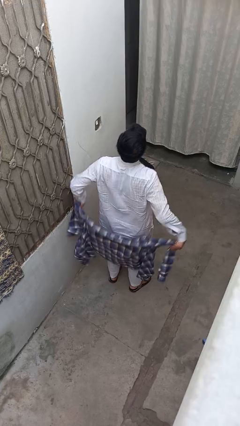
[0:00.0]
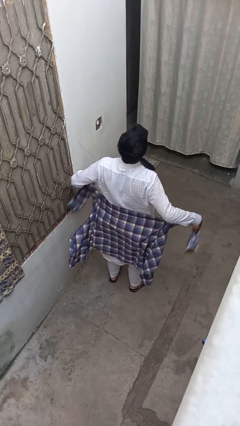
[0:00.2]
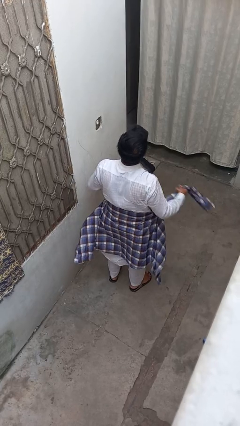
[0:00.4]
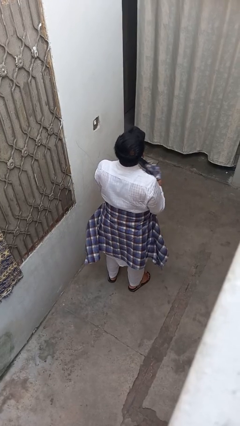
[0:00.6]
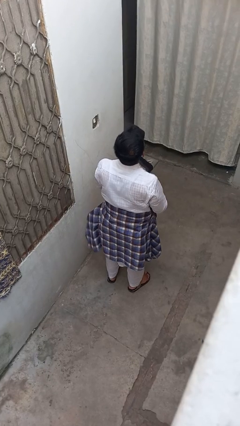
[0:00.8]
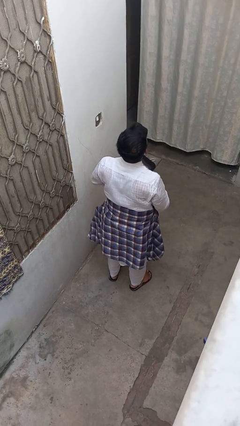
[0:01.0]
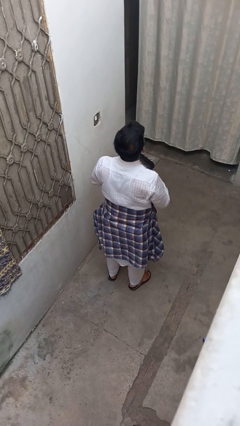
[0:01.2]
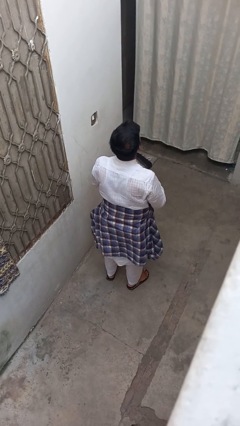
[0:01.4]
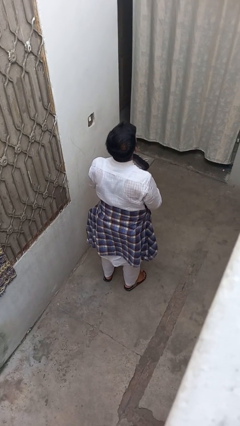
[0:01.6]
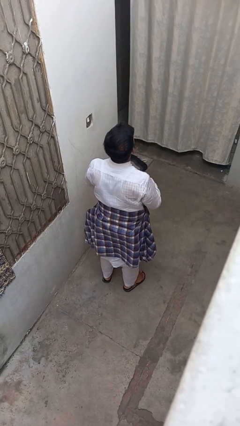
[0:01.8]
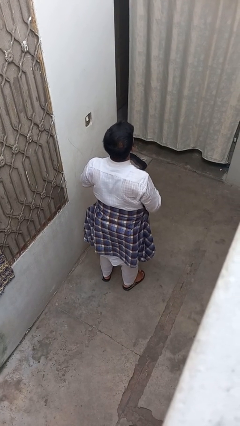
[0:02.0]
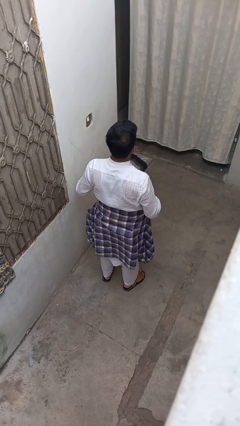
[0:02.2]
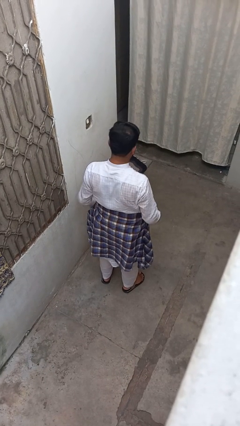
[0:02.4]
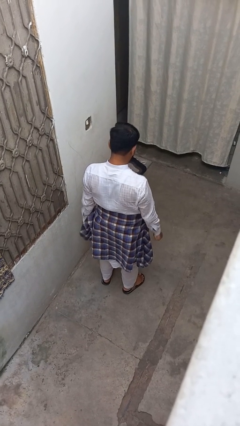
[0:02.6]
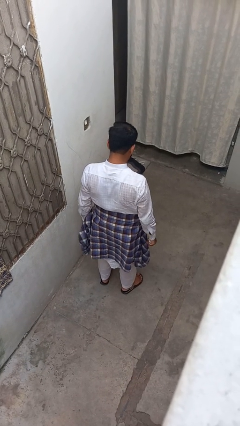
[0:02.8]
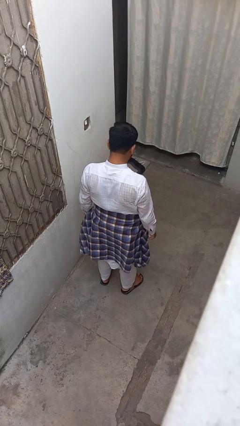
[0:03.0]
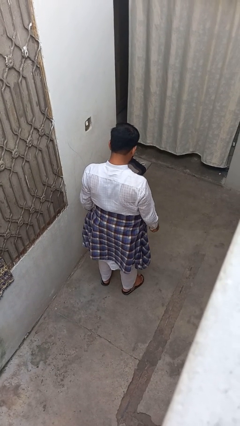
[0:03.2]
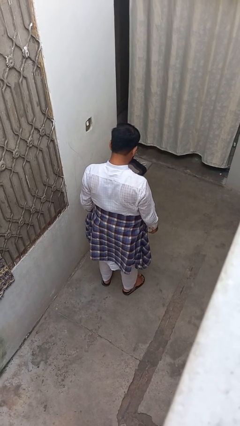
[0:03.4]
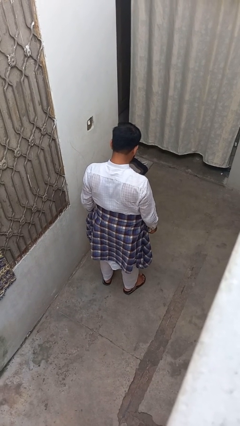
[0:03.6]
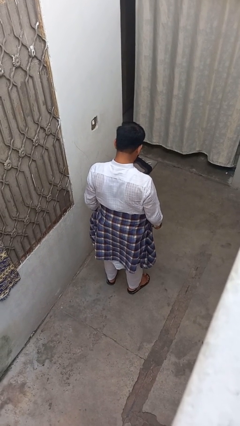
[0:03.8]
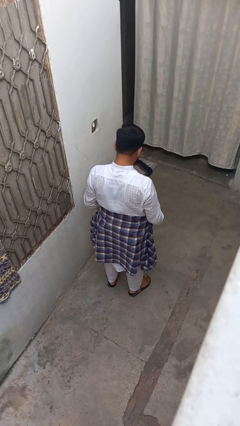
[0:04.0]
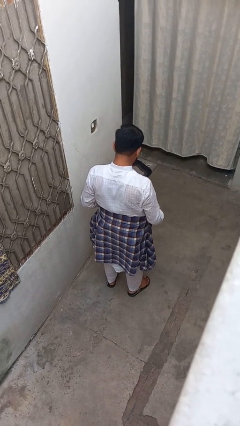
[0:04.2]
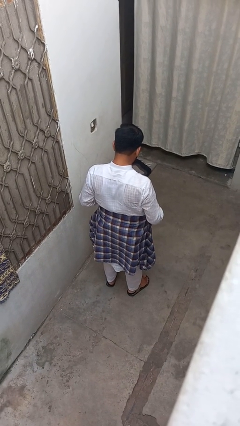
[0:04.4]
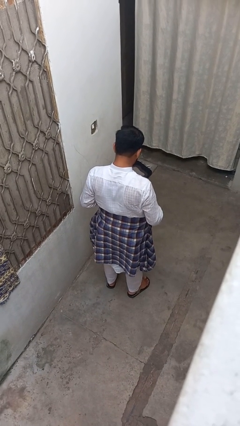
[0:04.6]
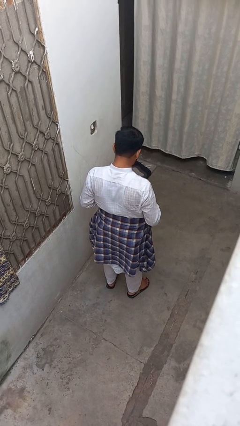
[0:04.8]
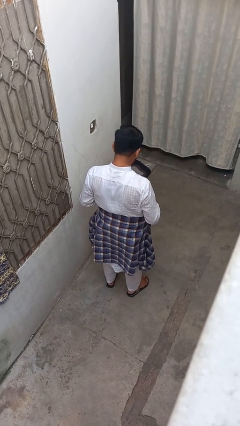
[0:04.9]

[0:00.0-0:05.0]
person ties jacket around waist

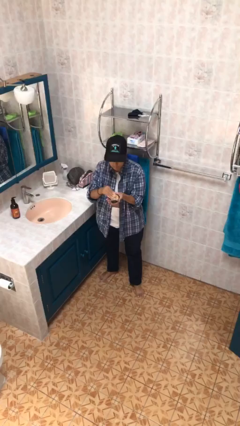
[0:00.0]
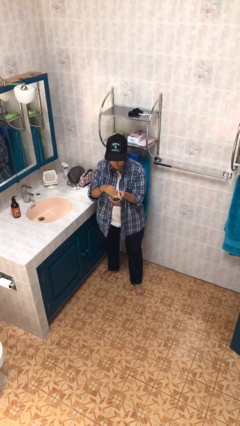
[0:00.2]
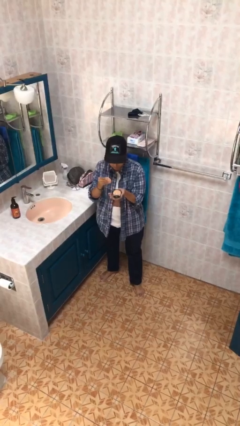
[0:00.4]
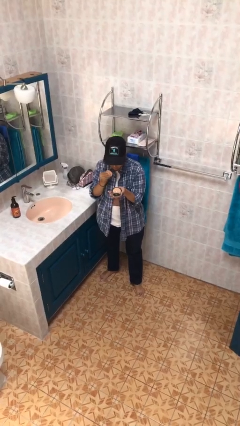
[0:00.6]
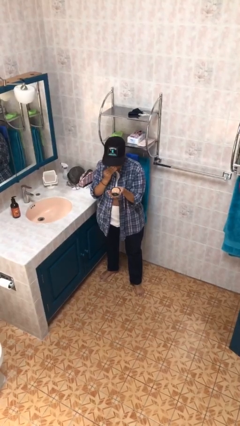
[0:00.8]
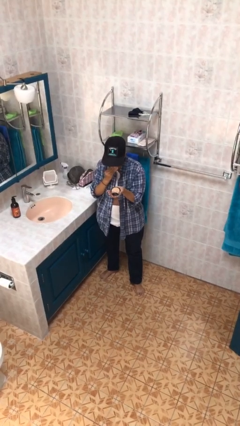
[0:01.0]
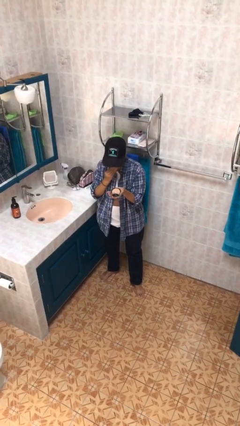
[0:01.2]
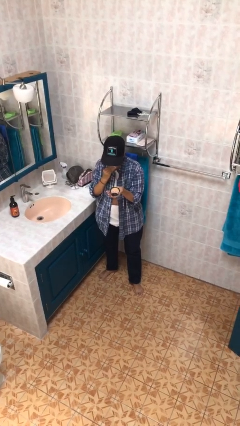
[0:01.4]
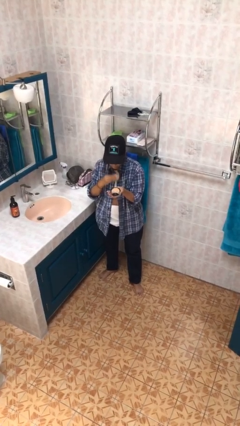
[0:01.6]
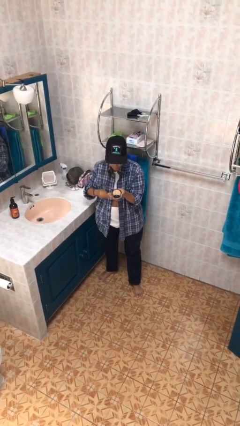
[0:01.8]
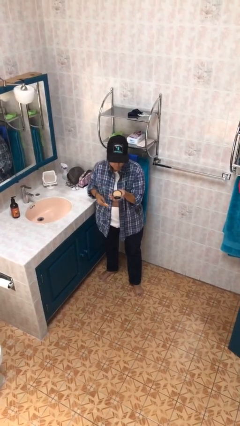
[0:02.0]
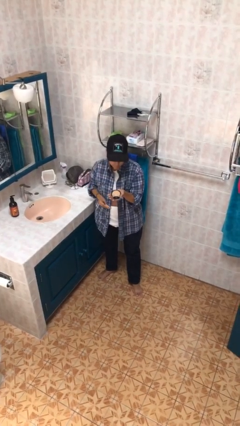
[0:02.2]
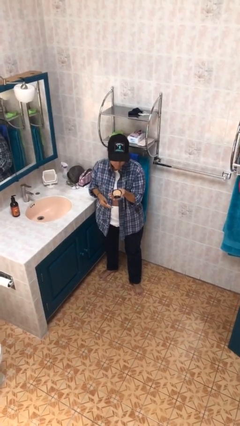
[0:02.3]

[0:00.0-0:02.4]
person applies foundation makeup

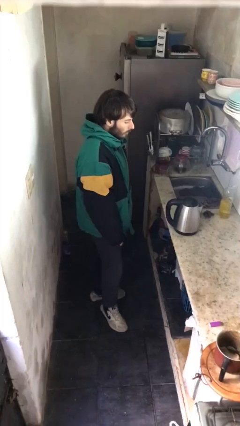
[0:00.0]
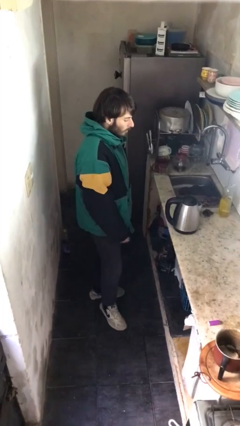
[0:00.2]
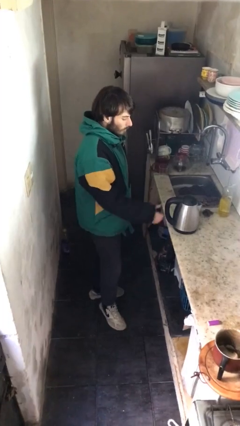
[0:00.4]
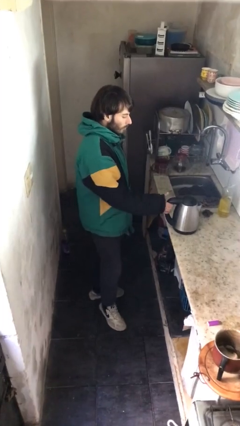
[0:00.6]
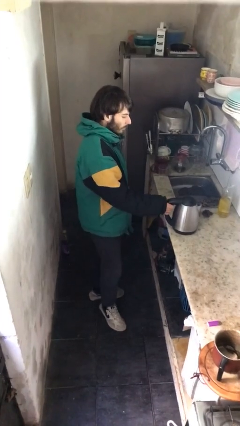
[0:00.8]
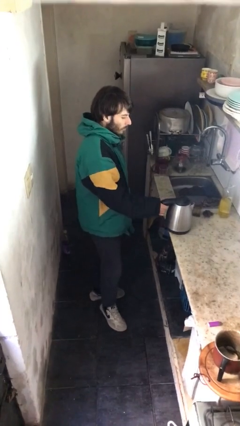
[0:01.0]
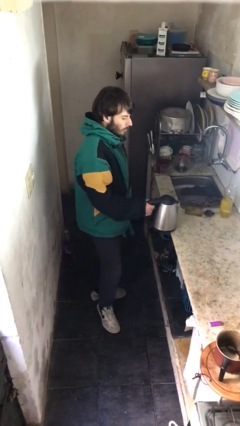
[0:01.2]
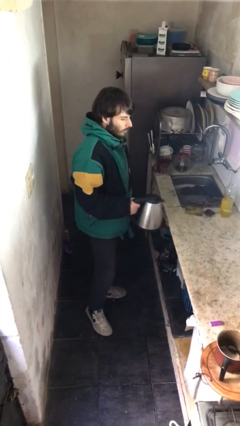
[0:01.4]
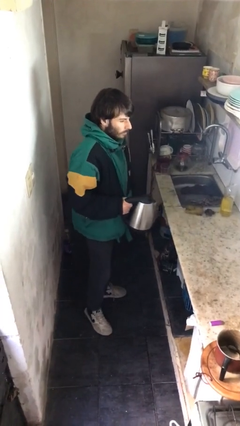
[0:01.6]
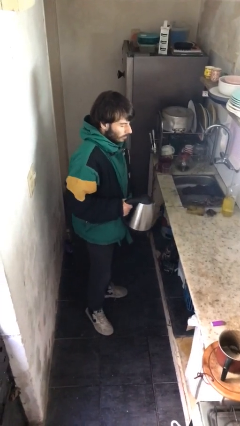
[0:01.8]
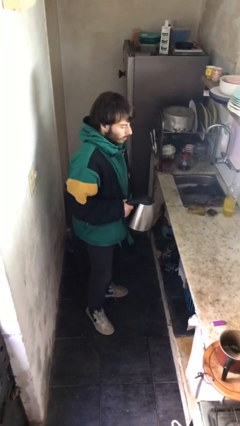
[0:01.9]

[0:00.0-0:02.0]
person picks up object from countertop

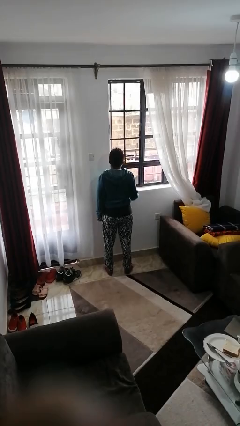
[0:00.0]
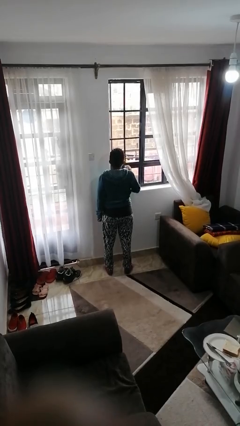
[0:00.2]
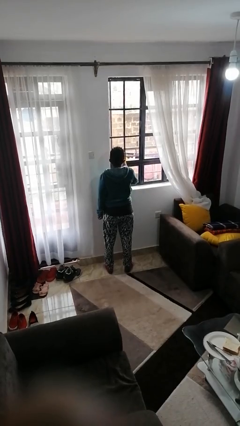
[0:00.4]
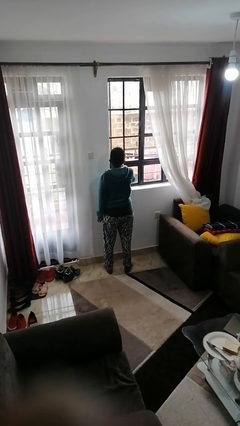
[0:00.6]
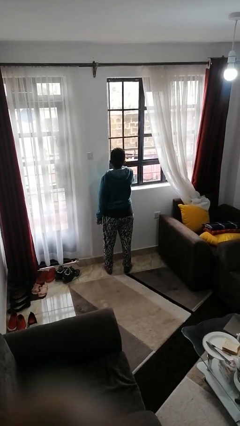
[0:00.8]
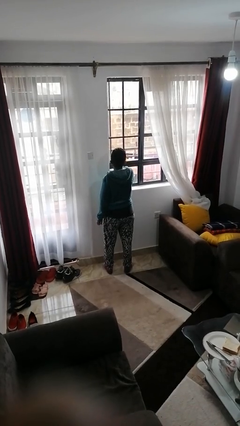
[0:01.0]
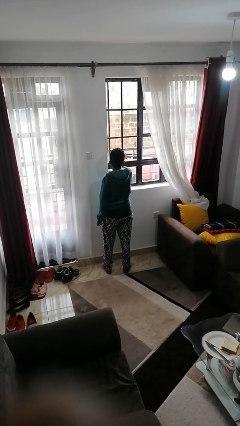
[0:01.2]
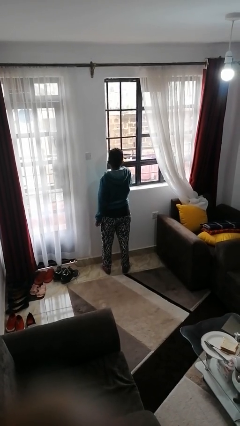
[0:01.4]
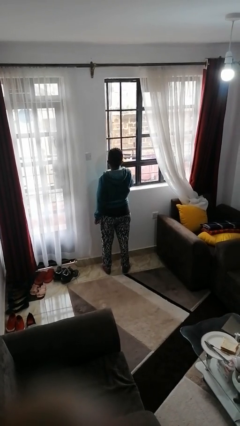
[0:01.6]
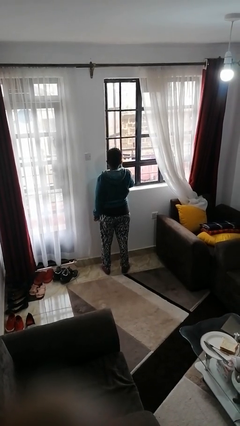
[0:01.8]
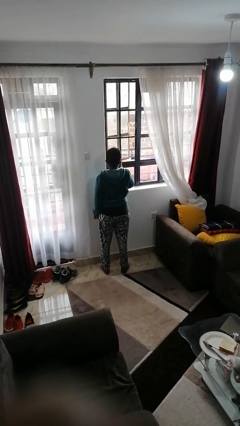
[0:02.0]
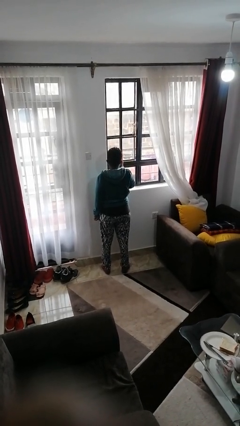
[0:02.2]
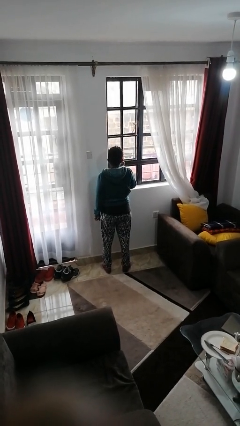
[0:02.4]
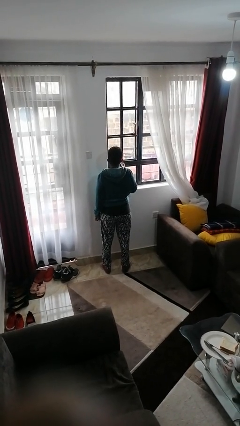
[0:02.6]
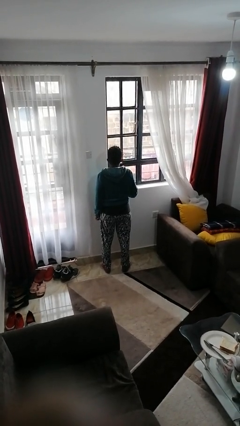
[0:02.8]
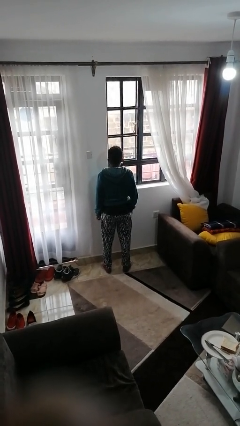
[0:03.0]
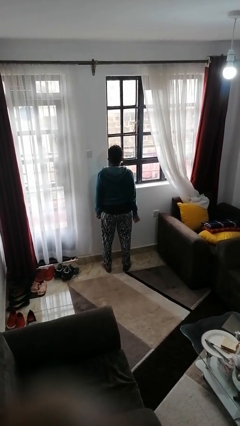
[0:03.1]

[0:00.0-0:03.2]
person closes home window

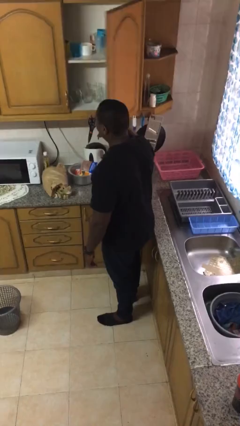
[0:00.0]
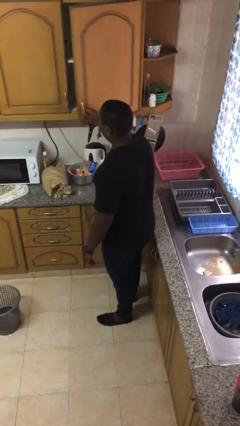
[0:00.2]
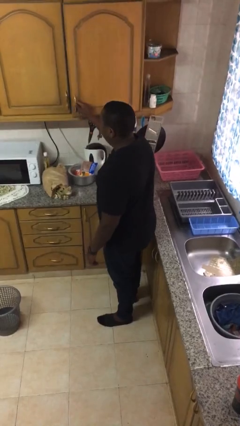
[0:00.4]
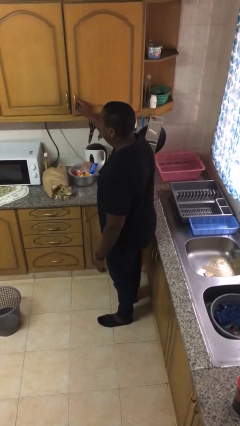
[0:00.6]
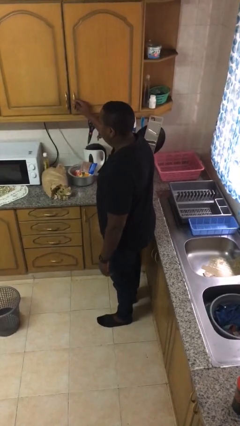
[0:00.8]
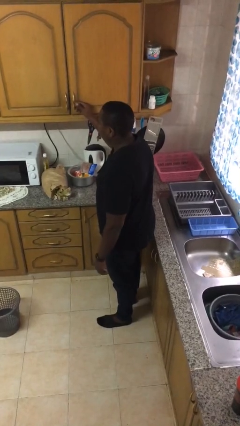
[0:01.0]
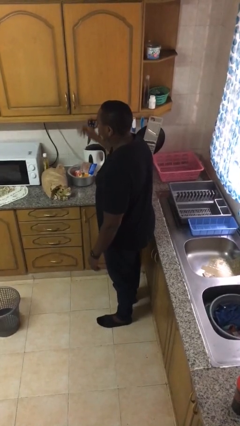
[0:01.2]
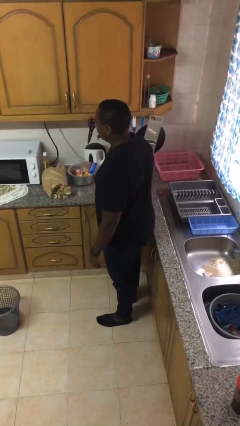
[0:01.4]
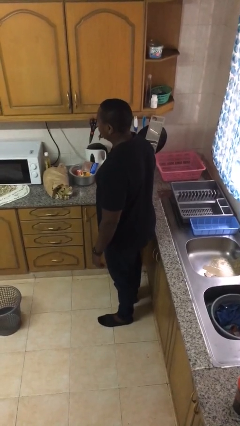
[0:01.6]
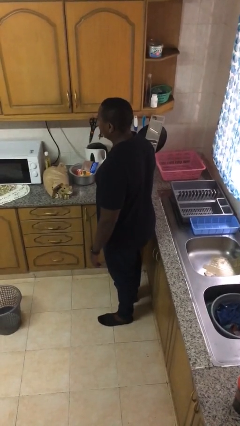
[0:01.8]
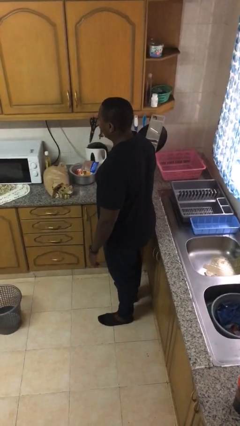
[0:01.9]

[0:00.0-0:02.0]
person closes cabinet

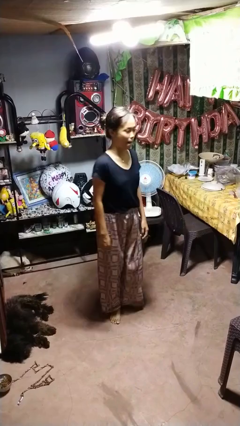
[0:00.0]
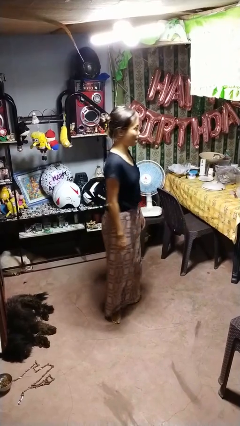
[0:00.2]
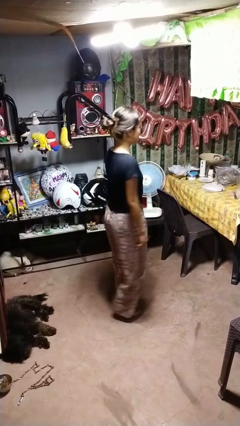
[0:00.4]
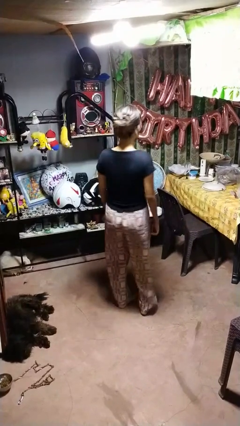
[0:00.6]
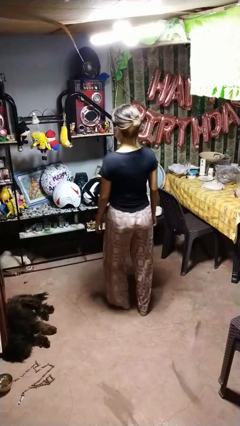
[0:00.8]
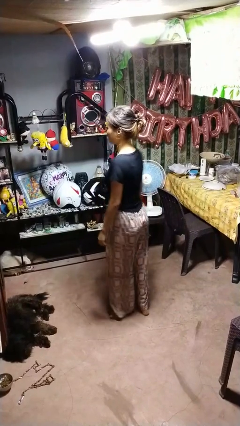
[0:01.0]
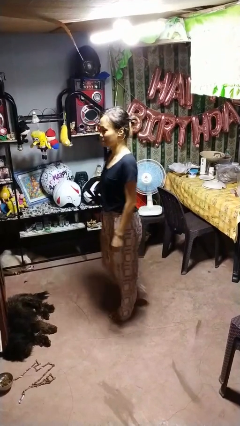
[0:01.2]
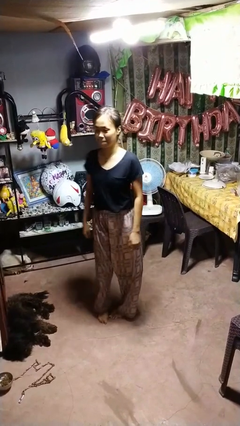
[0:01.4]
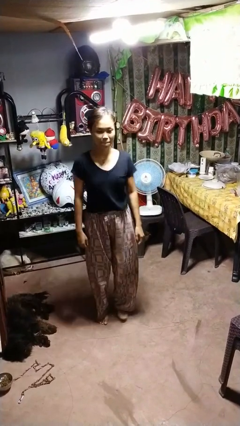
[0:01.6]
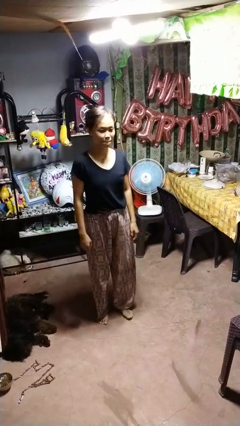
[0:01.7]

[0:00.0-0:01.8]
person twirls

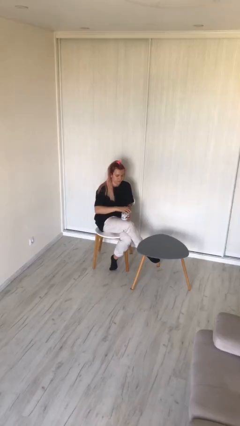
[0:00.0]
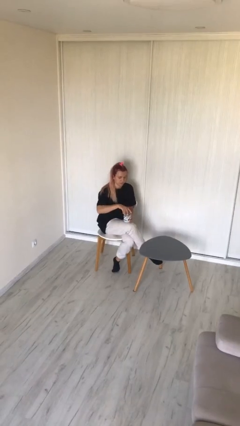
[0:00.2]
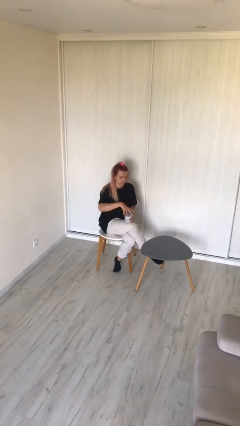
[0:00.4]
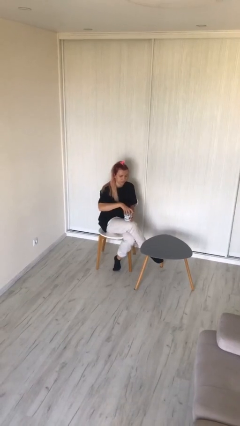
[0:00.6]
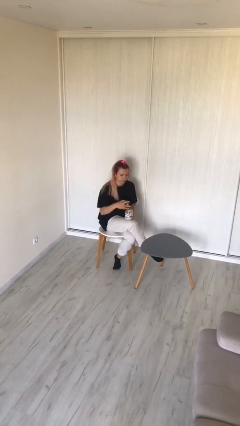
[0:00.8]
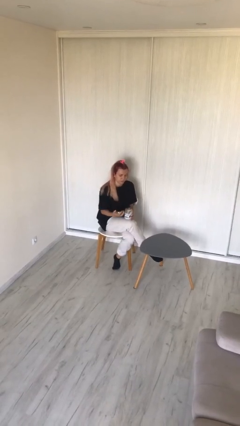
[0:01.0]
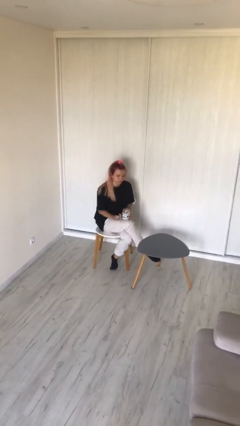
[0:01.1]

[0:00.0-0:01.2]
person opens jar
